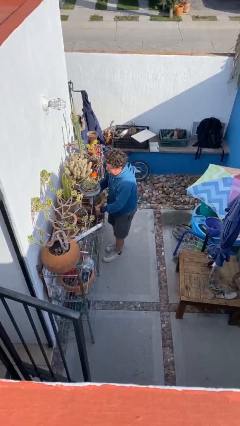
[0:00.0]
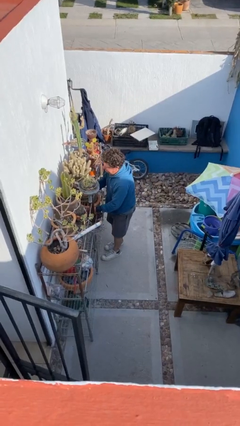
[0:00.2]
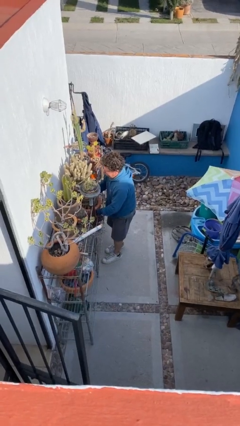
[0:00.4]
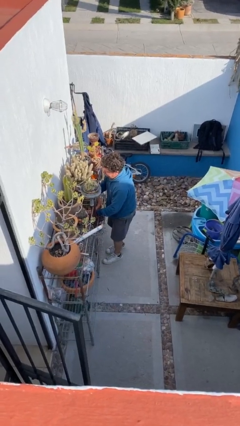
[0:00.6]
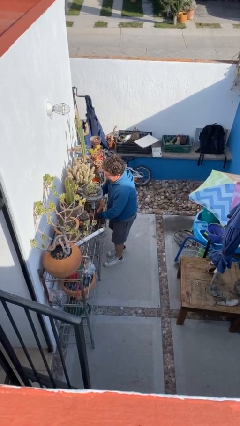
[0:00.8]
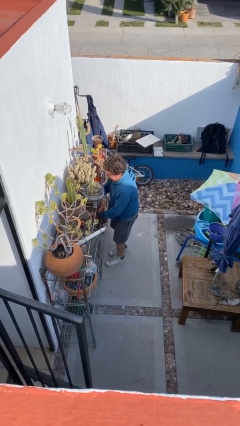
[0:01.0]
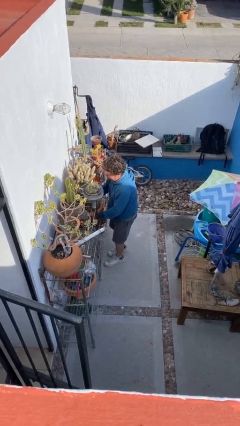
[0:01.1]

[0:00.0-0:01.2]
person puts down object on shelf

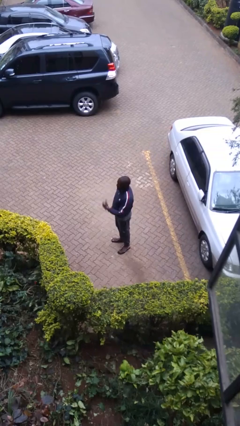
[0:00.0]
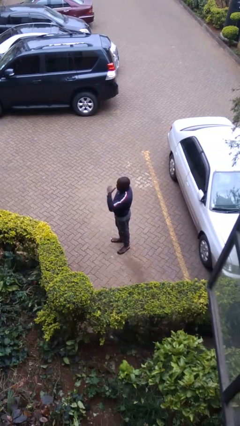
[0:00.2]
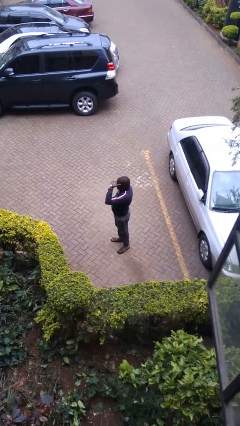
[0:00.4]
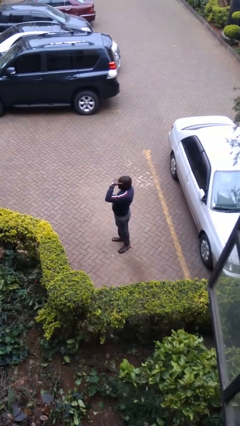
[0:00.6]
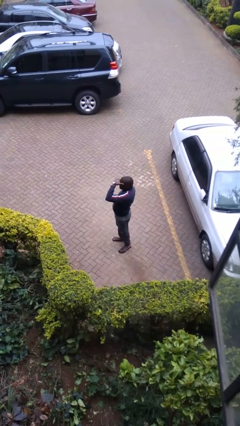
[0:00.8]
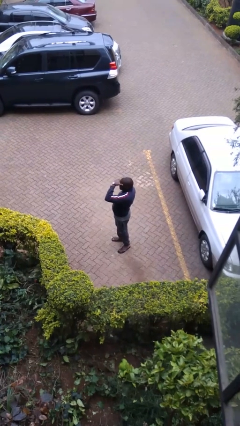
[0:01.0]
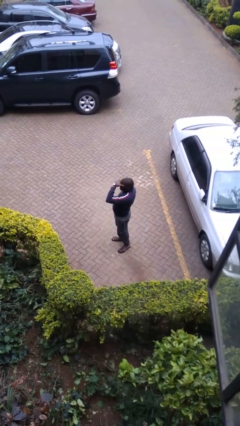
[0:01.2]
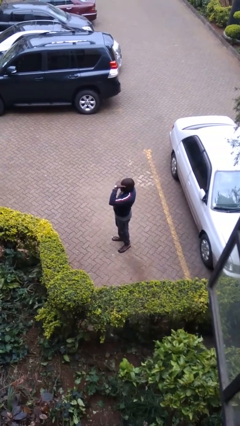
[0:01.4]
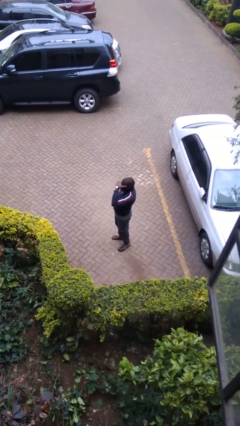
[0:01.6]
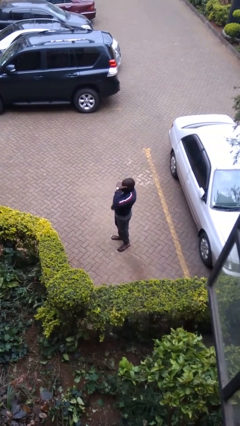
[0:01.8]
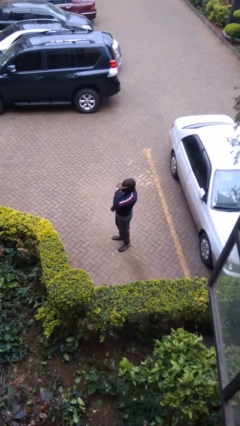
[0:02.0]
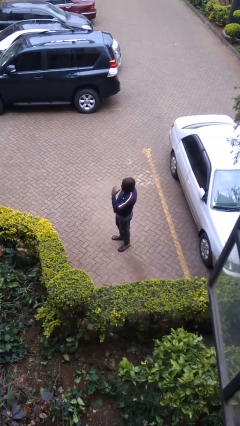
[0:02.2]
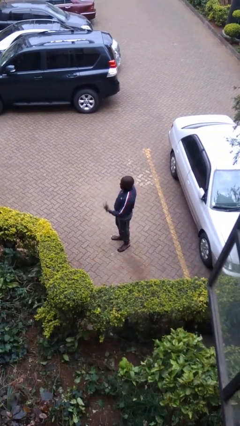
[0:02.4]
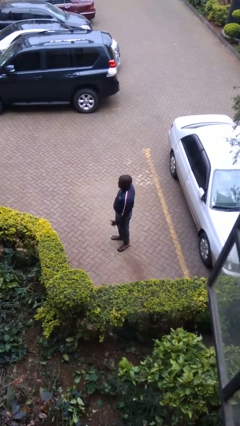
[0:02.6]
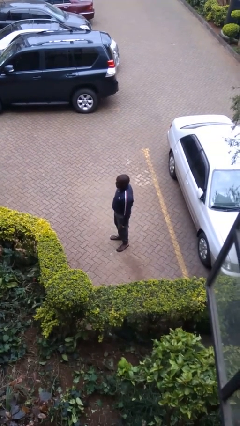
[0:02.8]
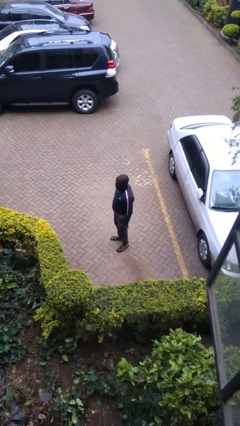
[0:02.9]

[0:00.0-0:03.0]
person shades eyes

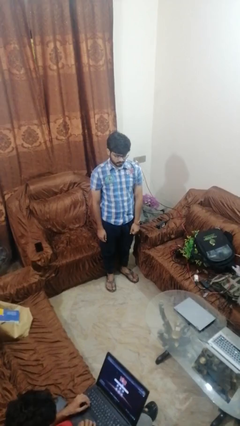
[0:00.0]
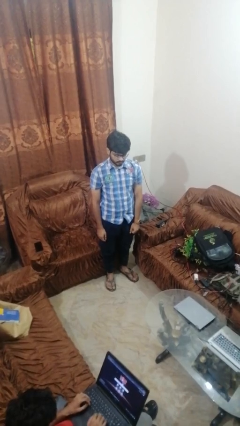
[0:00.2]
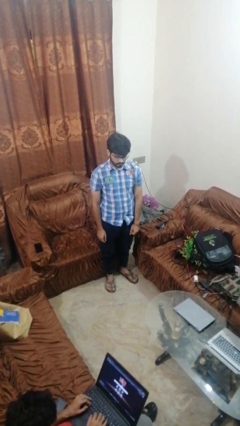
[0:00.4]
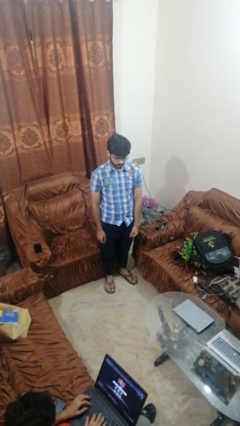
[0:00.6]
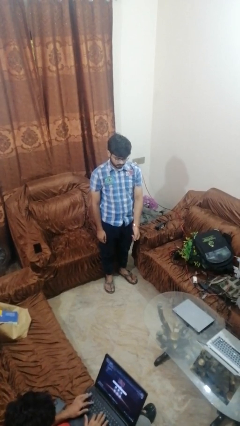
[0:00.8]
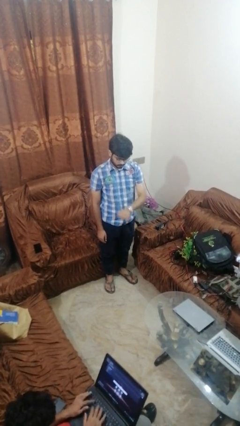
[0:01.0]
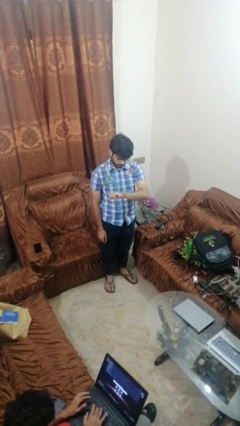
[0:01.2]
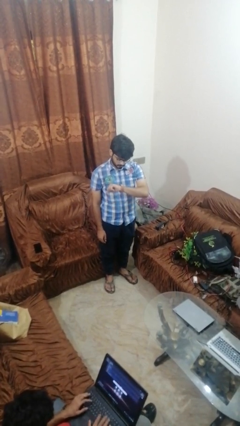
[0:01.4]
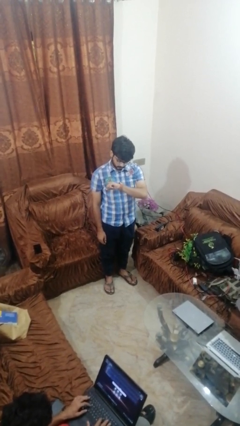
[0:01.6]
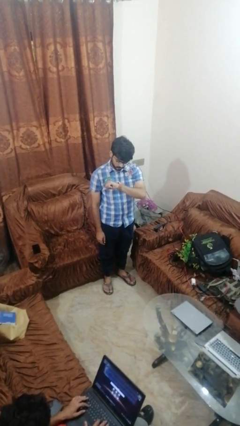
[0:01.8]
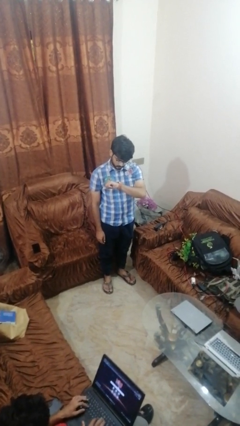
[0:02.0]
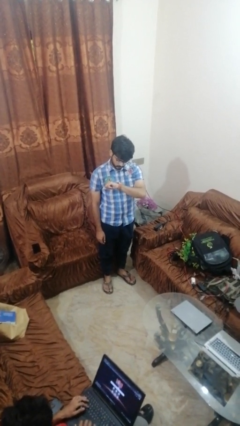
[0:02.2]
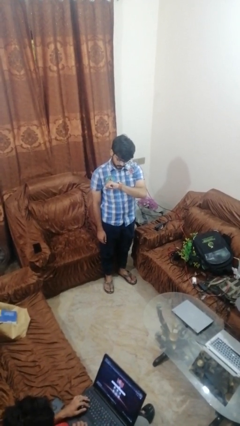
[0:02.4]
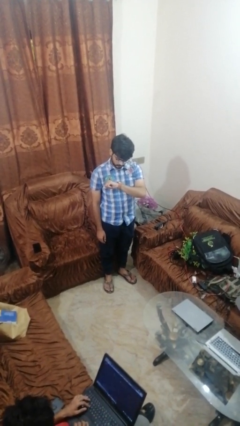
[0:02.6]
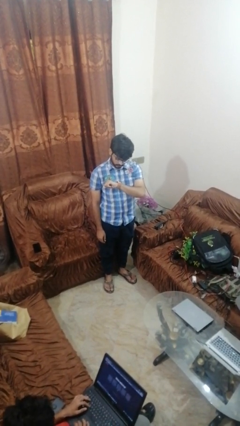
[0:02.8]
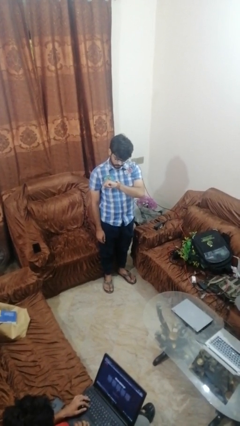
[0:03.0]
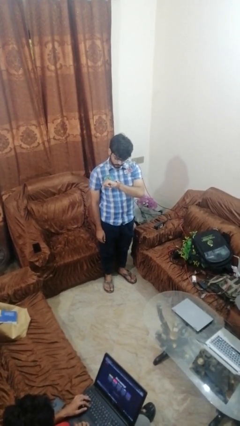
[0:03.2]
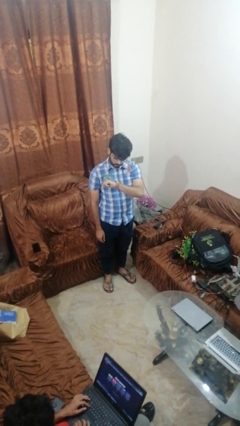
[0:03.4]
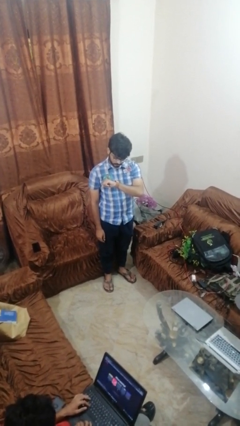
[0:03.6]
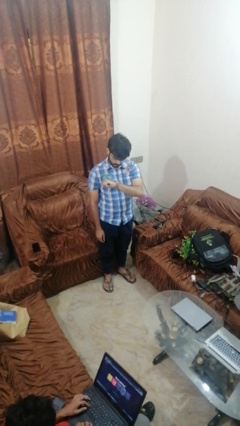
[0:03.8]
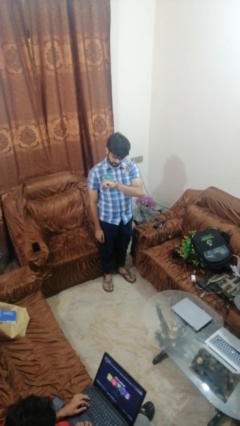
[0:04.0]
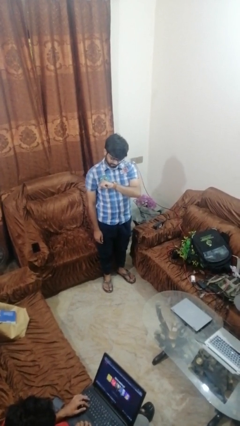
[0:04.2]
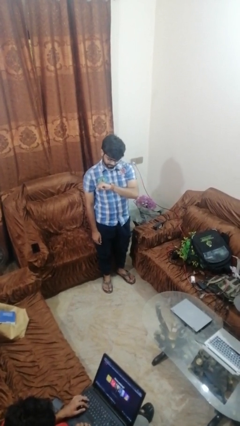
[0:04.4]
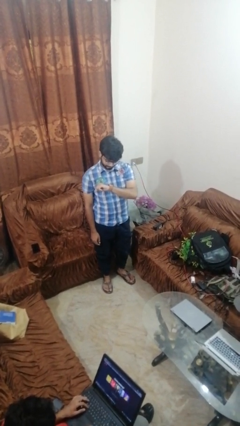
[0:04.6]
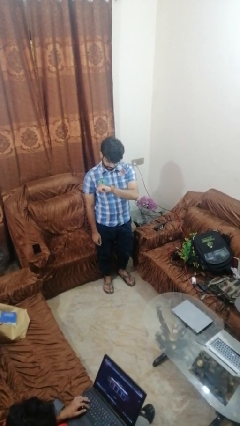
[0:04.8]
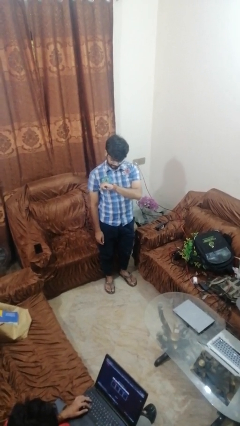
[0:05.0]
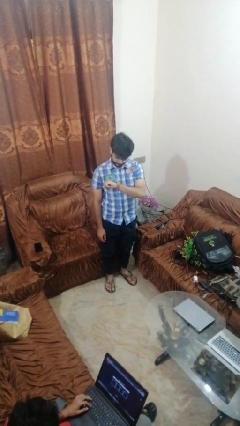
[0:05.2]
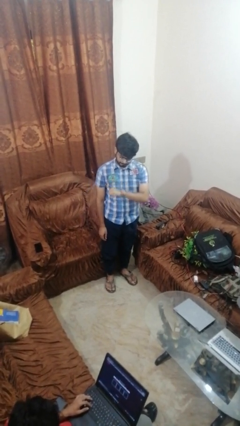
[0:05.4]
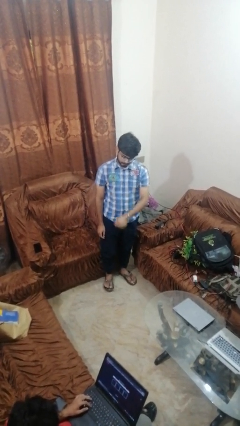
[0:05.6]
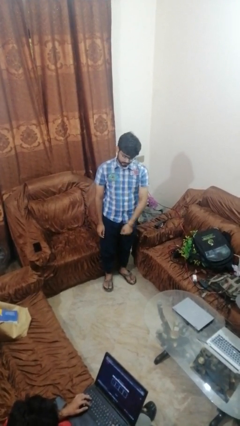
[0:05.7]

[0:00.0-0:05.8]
person looks at wristwatch

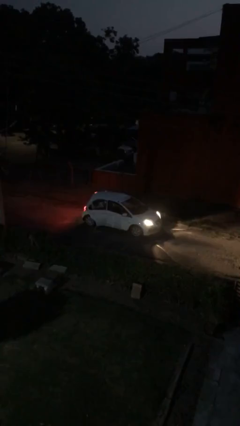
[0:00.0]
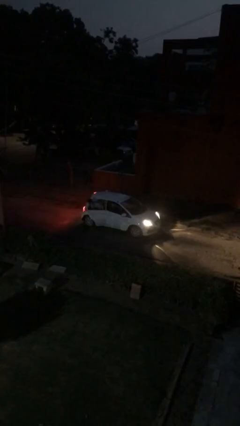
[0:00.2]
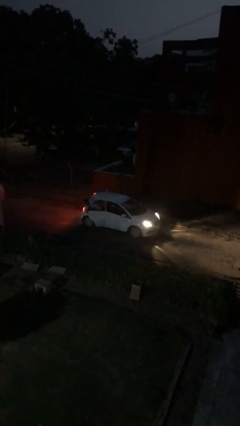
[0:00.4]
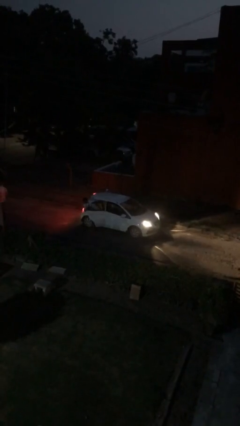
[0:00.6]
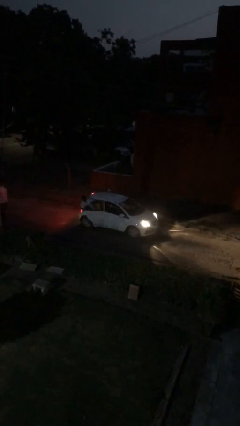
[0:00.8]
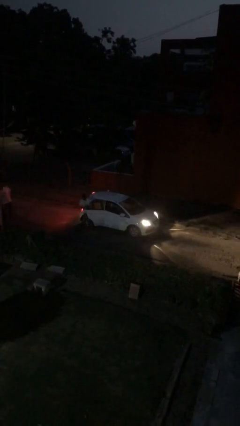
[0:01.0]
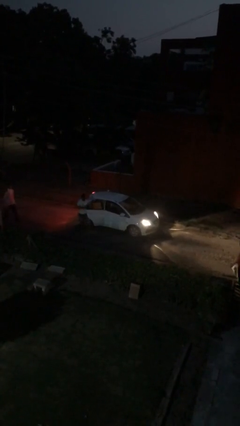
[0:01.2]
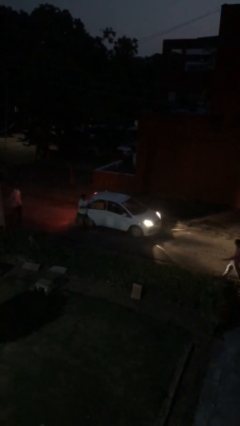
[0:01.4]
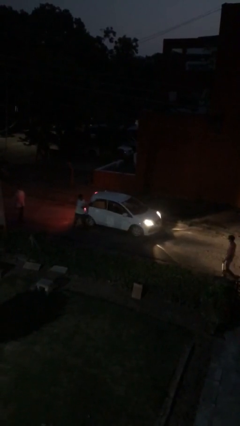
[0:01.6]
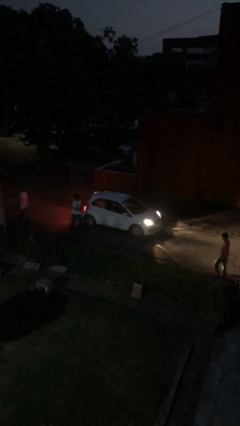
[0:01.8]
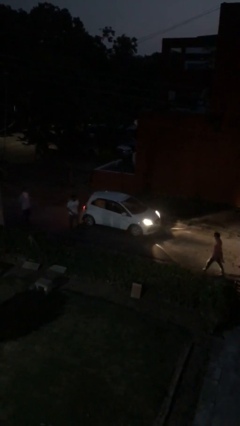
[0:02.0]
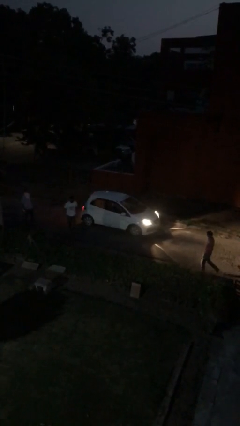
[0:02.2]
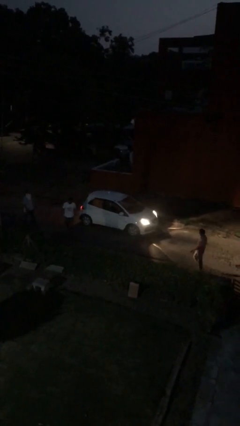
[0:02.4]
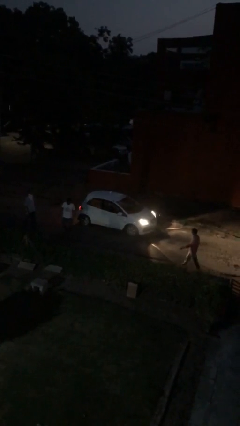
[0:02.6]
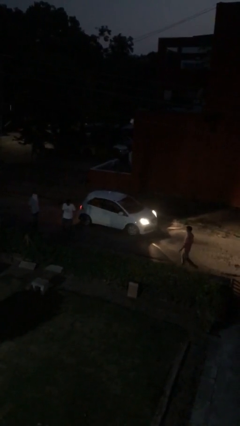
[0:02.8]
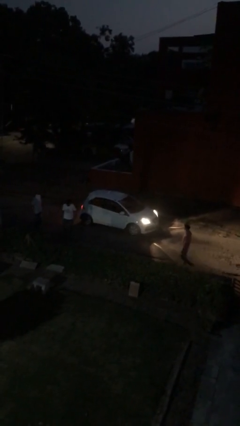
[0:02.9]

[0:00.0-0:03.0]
car drops off person

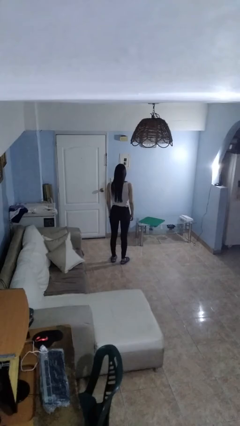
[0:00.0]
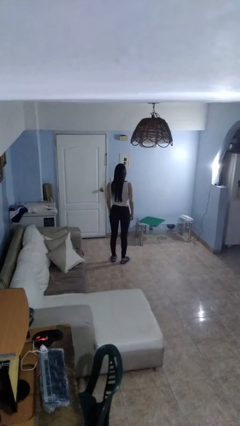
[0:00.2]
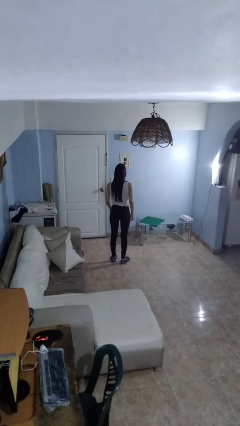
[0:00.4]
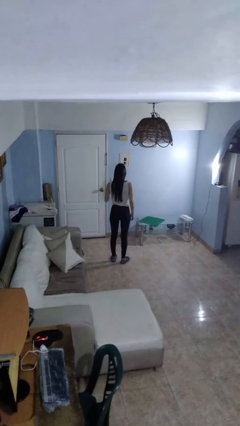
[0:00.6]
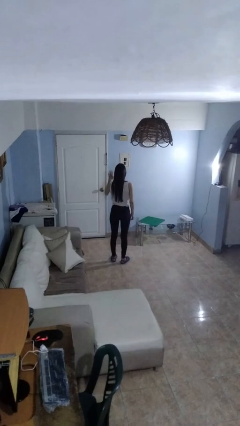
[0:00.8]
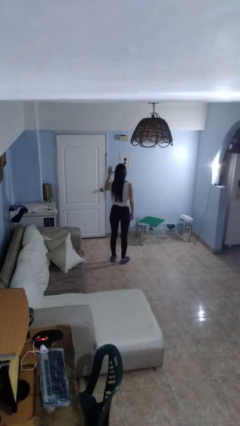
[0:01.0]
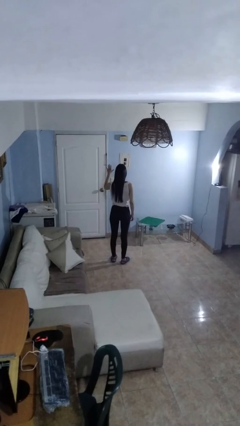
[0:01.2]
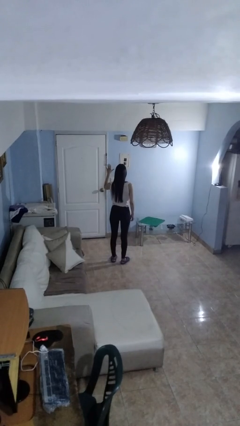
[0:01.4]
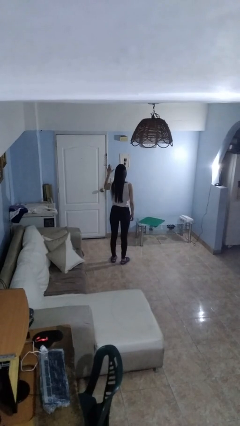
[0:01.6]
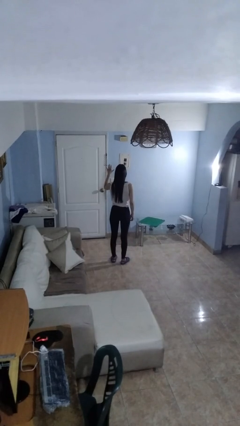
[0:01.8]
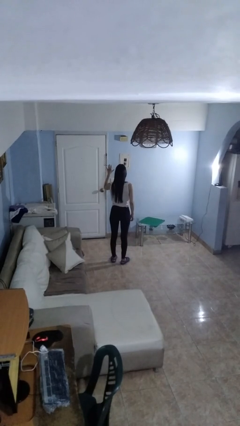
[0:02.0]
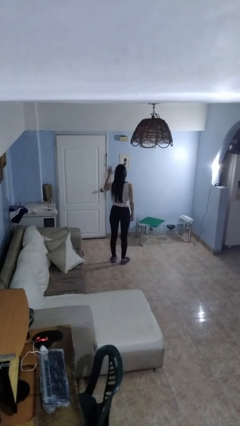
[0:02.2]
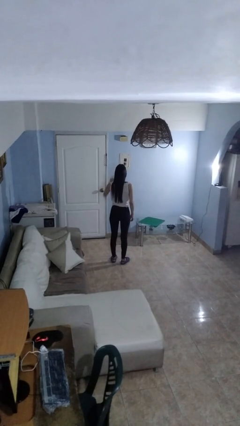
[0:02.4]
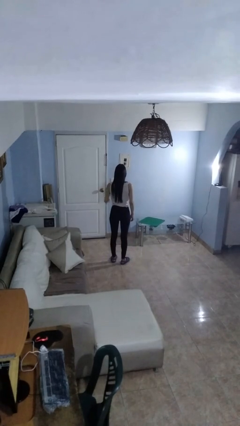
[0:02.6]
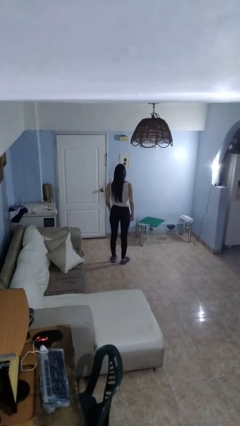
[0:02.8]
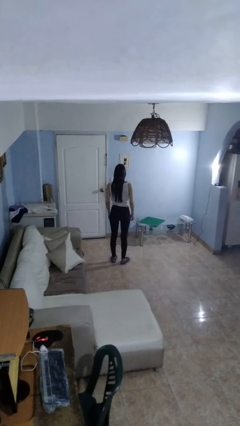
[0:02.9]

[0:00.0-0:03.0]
person gestures number five

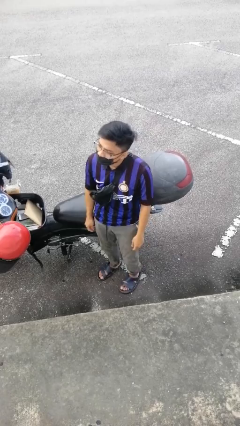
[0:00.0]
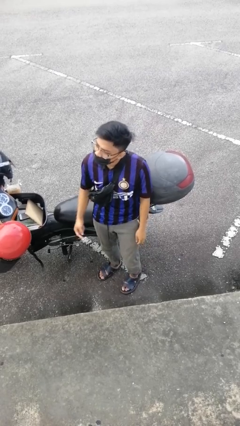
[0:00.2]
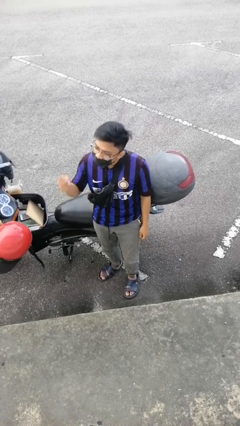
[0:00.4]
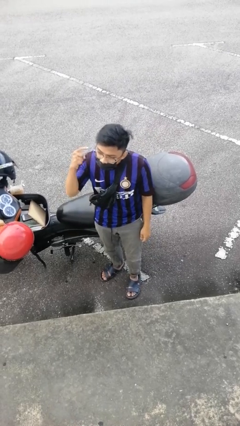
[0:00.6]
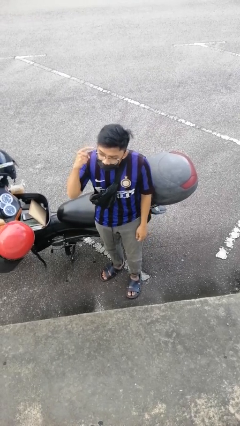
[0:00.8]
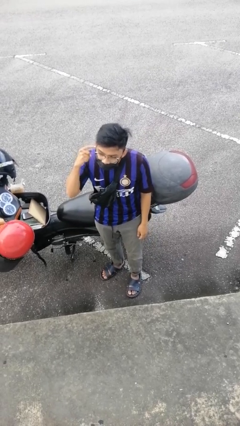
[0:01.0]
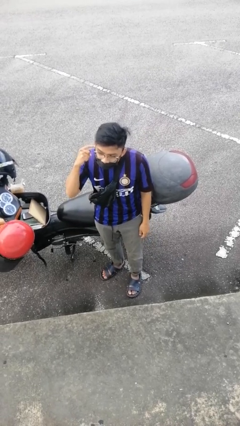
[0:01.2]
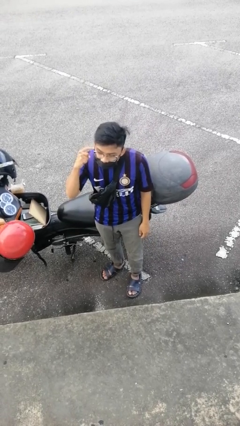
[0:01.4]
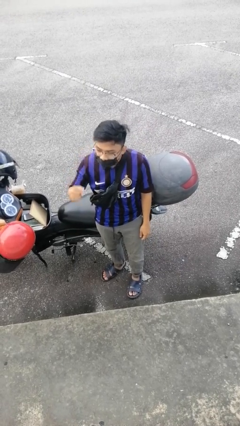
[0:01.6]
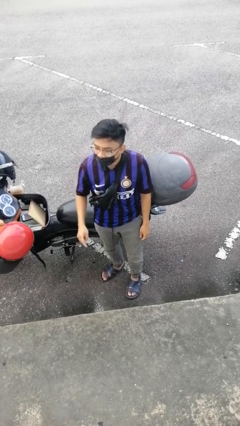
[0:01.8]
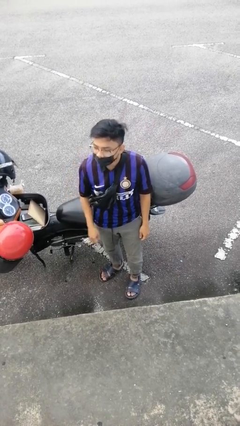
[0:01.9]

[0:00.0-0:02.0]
person gestures listen closely
